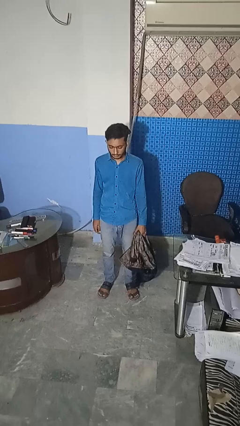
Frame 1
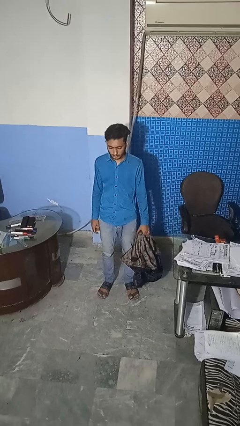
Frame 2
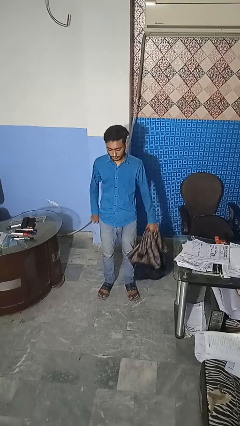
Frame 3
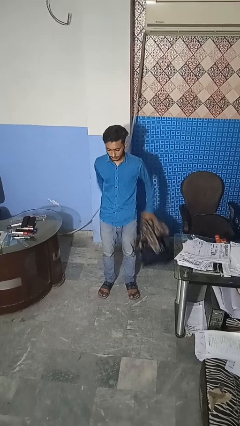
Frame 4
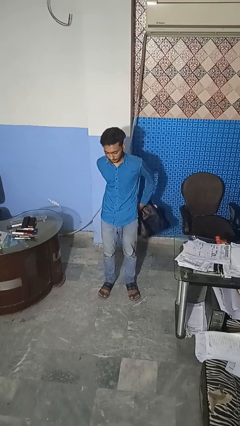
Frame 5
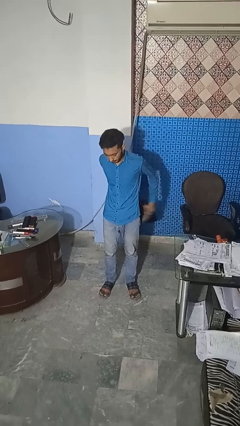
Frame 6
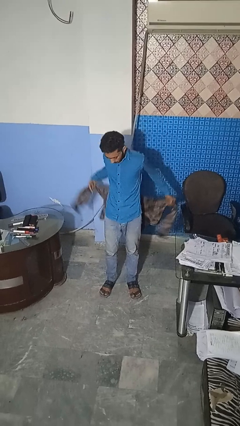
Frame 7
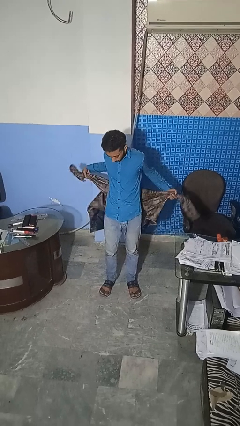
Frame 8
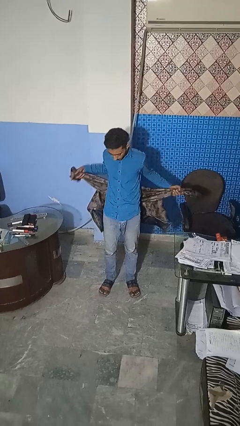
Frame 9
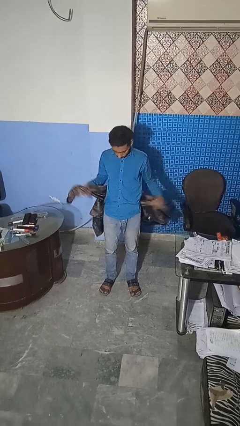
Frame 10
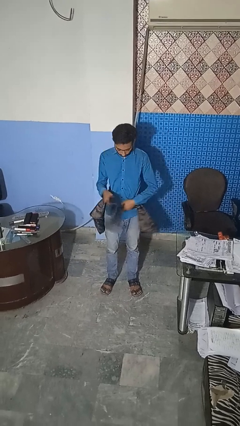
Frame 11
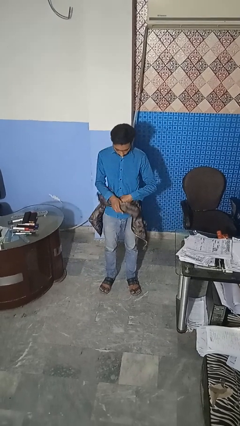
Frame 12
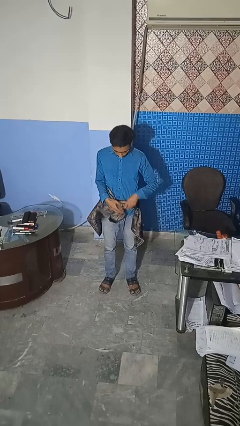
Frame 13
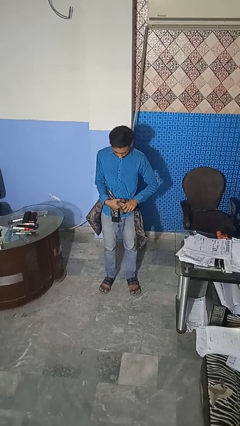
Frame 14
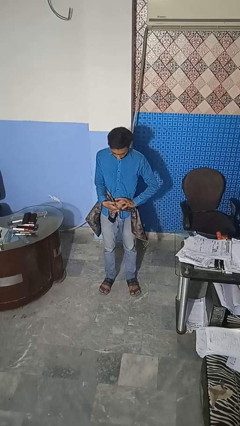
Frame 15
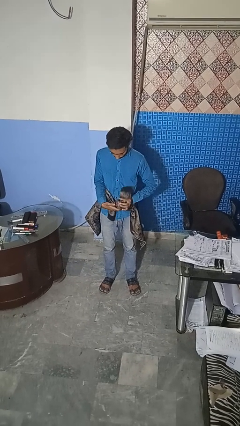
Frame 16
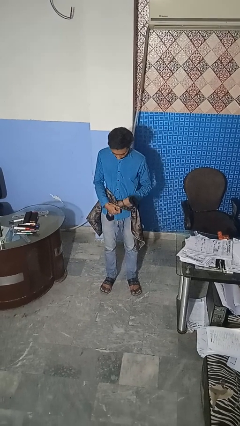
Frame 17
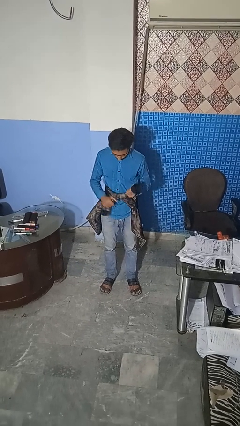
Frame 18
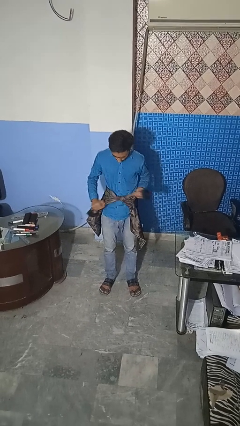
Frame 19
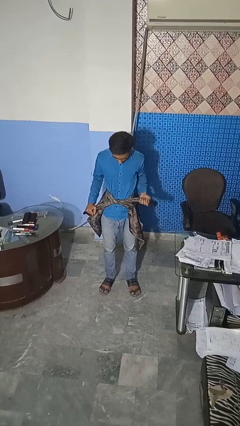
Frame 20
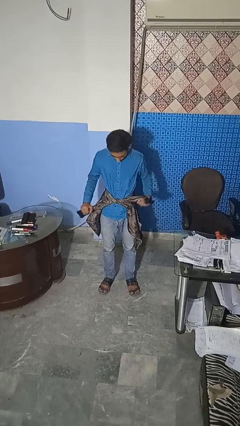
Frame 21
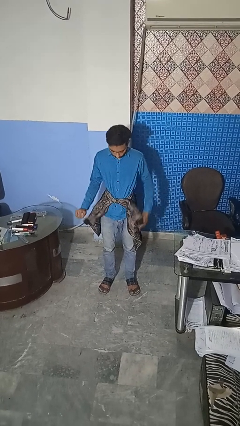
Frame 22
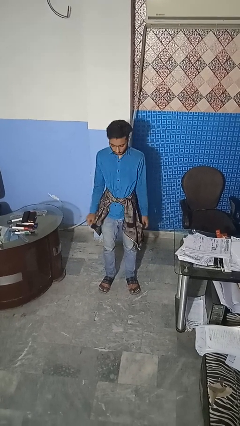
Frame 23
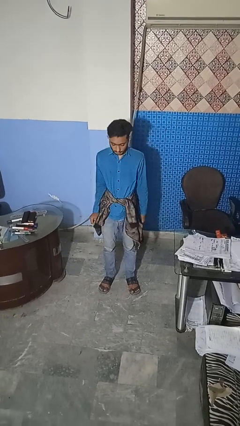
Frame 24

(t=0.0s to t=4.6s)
person ties jacket around waist

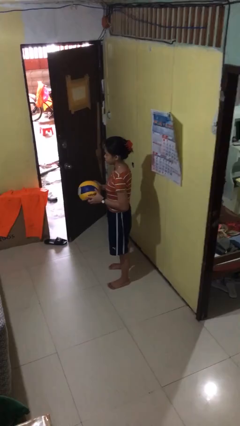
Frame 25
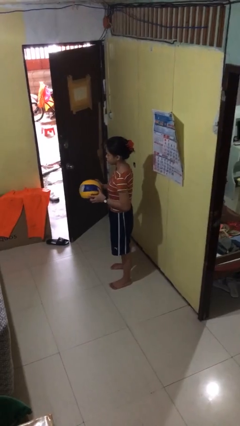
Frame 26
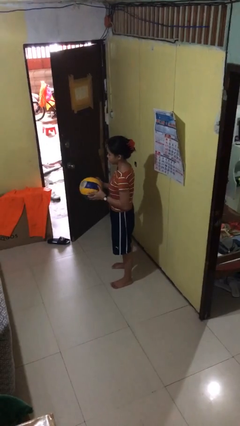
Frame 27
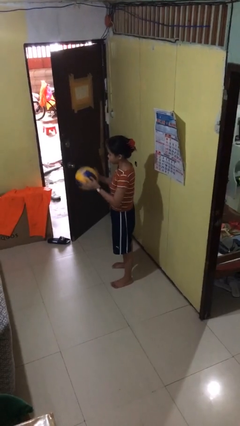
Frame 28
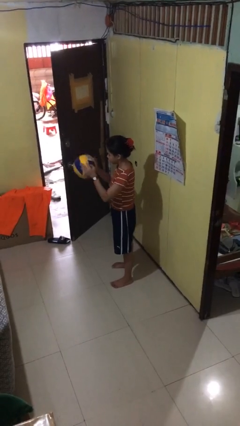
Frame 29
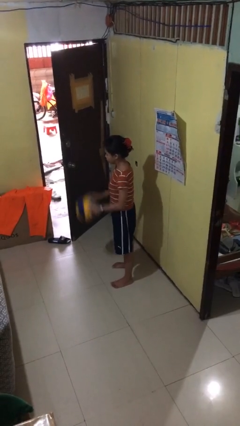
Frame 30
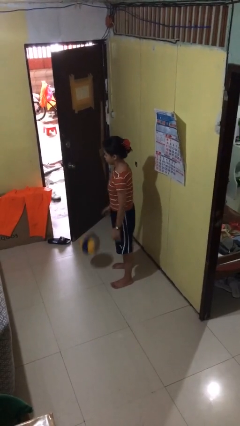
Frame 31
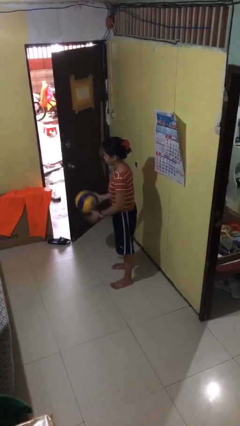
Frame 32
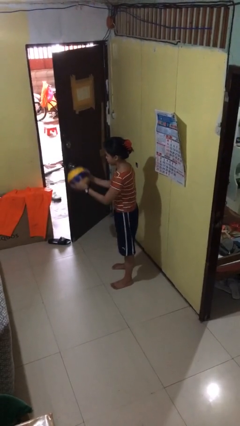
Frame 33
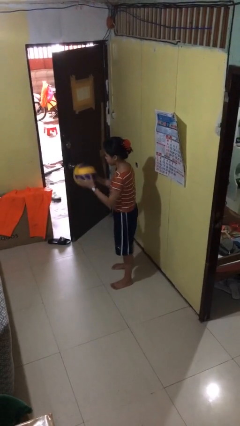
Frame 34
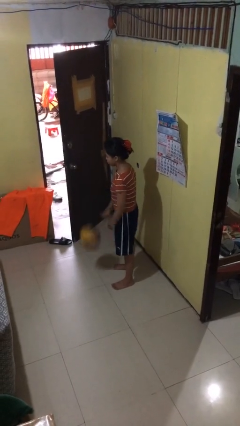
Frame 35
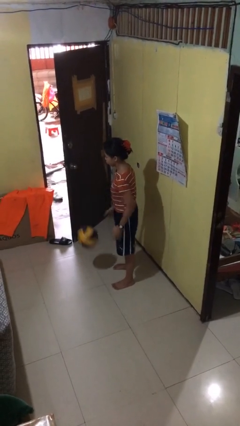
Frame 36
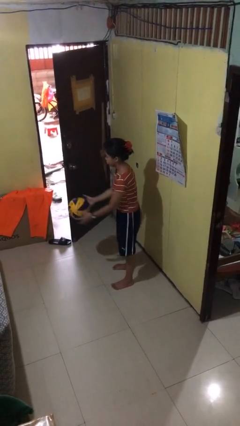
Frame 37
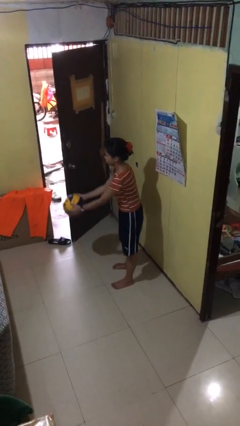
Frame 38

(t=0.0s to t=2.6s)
person bounces ball on floor

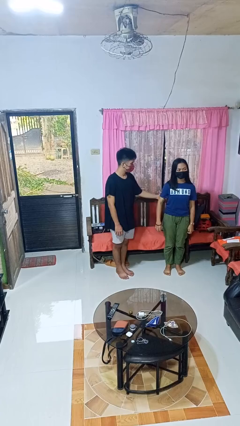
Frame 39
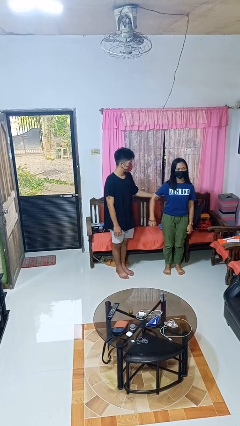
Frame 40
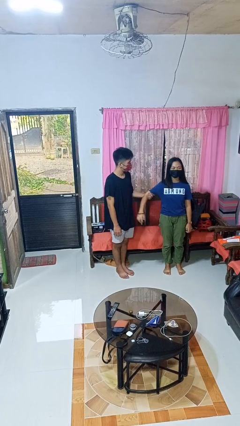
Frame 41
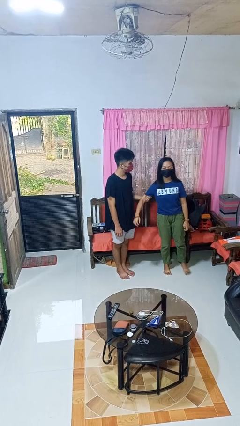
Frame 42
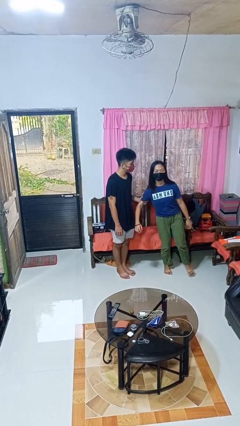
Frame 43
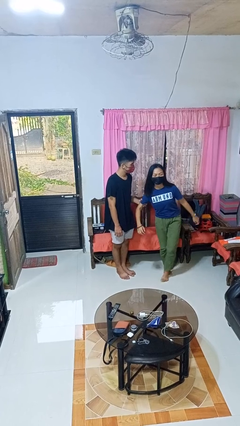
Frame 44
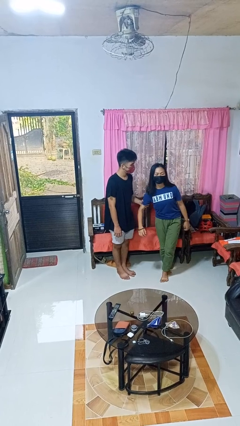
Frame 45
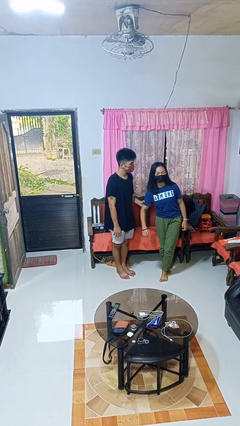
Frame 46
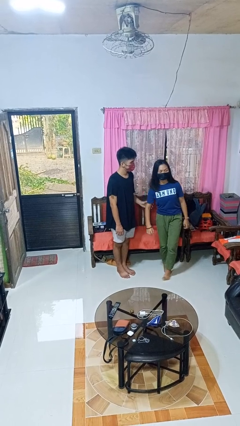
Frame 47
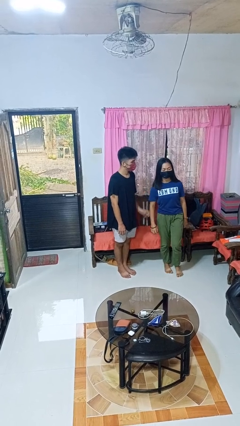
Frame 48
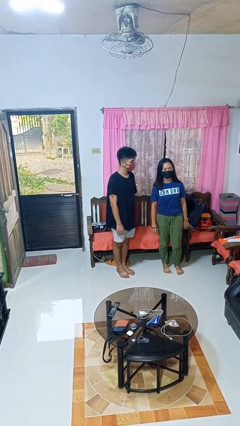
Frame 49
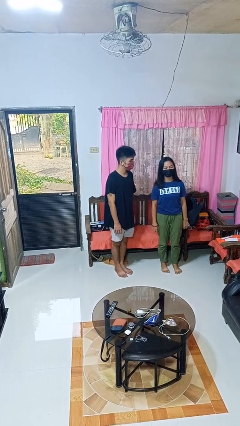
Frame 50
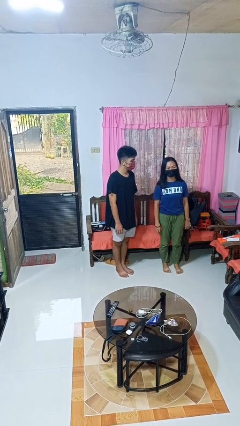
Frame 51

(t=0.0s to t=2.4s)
person grabs person by bicep

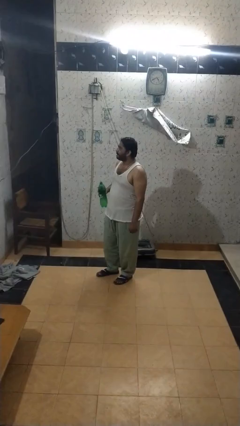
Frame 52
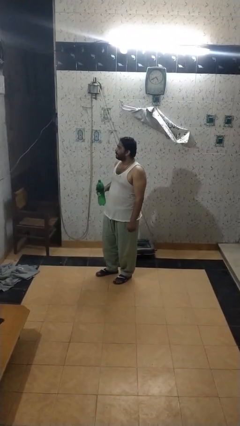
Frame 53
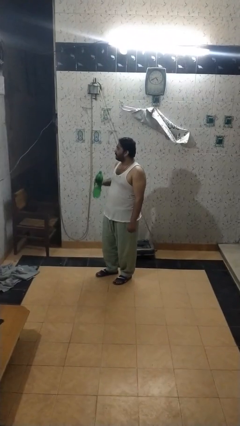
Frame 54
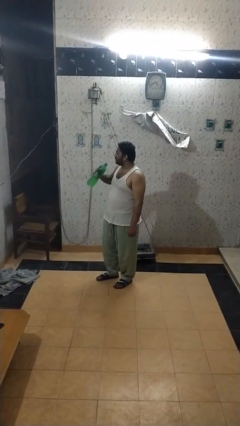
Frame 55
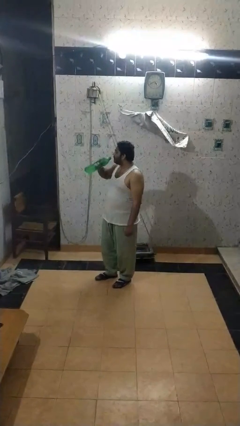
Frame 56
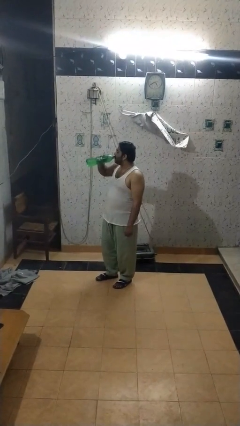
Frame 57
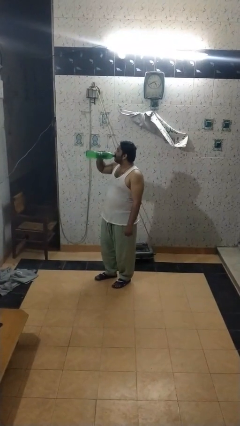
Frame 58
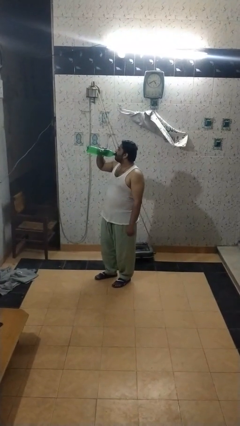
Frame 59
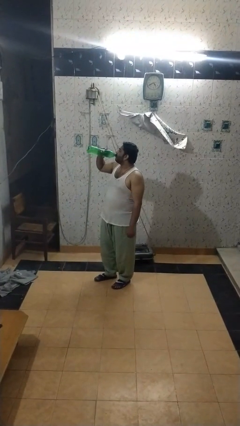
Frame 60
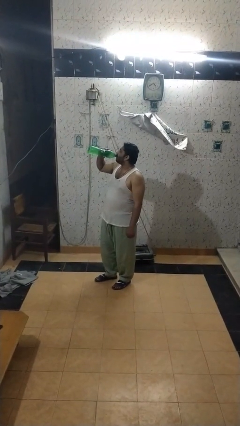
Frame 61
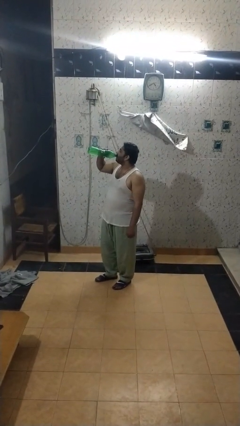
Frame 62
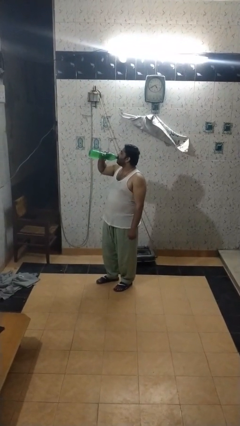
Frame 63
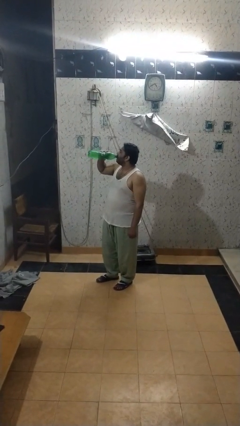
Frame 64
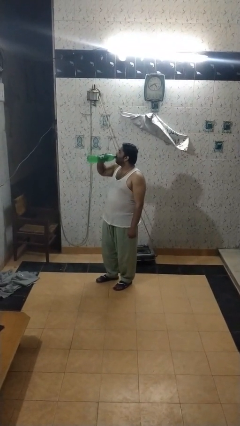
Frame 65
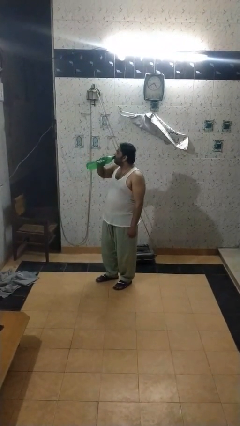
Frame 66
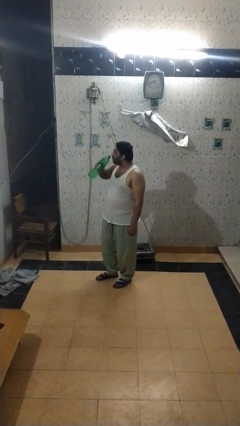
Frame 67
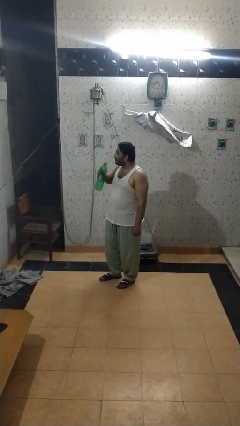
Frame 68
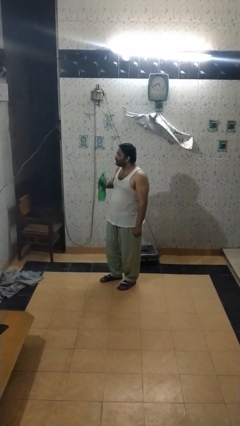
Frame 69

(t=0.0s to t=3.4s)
person drinks from bottle

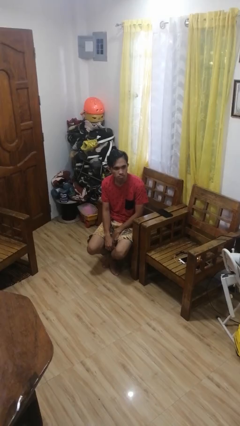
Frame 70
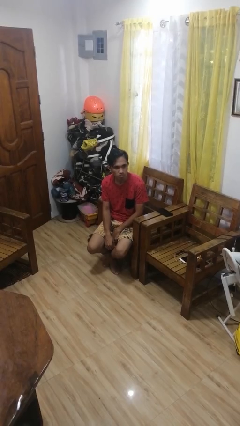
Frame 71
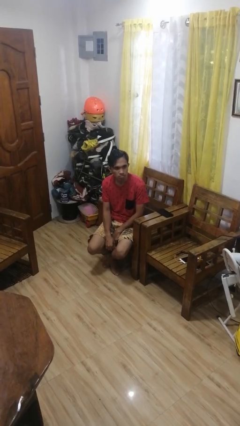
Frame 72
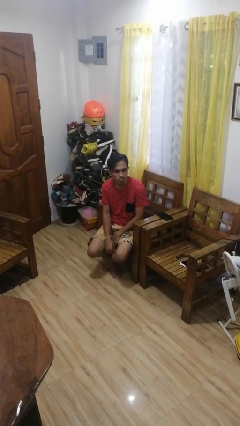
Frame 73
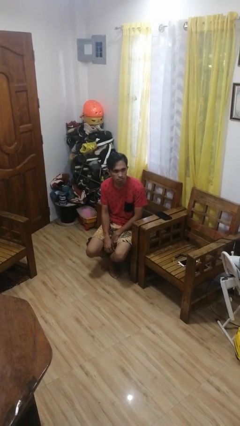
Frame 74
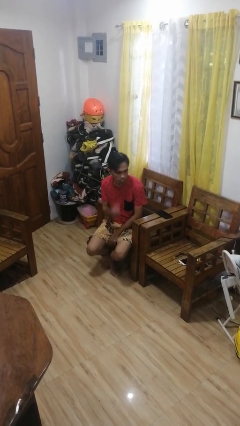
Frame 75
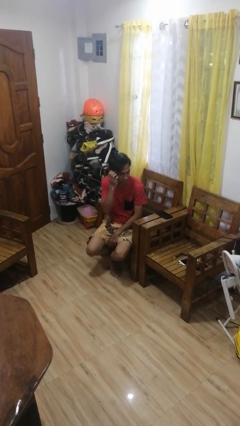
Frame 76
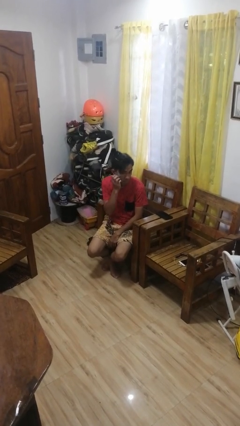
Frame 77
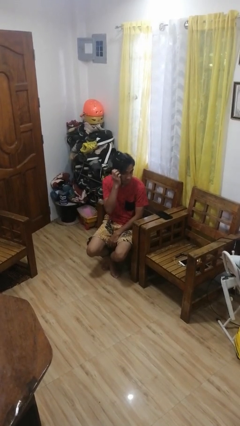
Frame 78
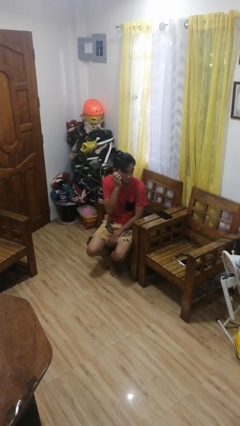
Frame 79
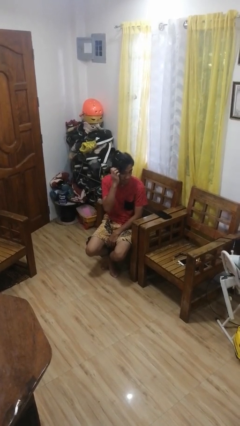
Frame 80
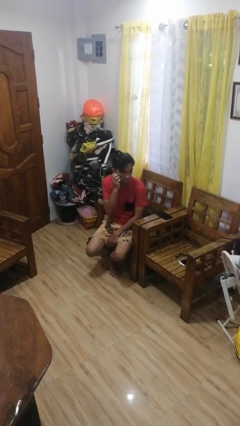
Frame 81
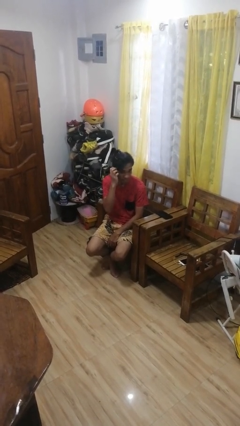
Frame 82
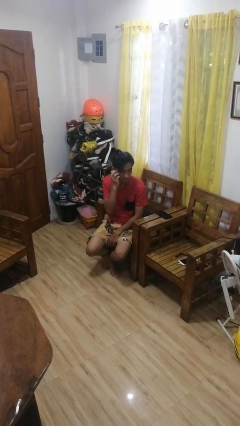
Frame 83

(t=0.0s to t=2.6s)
person scratches face

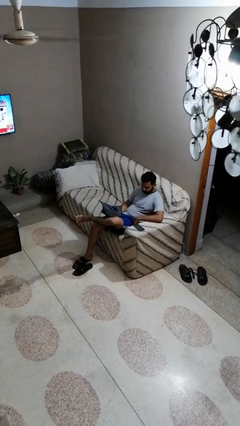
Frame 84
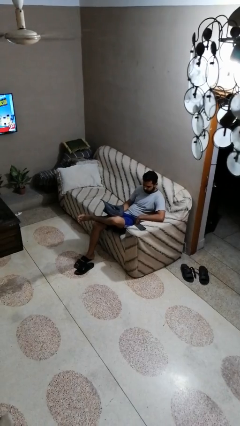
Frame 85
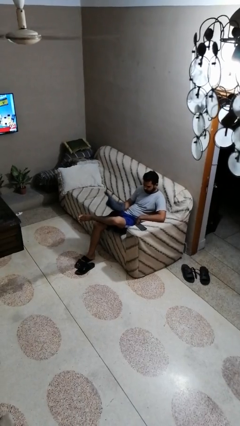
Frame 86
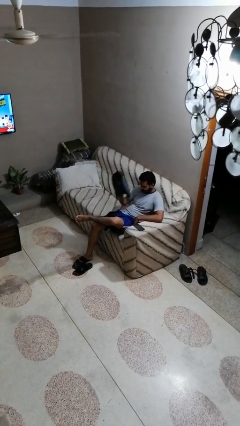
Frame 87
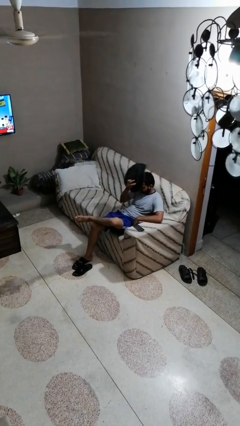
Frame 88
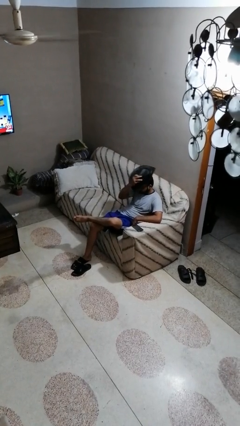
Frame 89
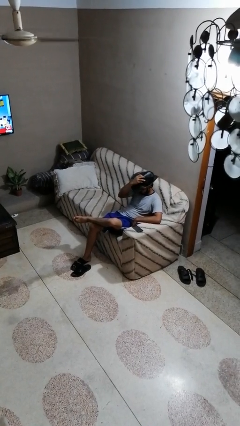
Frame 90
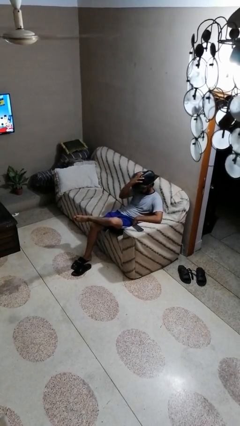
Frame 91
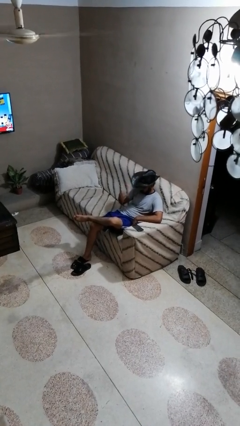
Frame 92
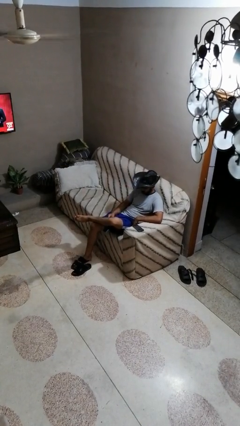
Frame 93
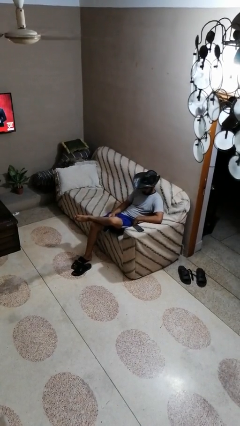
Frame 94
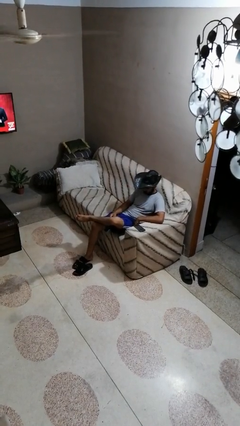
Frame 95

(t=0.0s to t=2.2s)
person puts on hat
